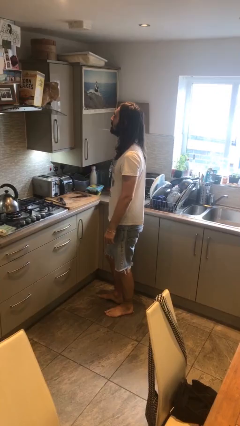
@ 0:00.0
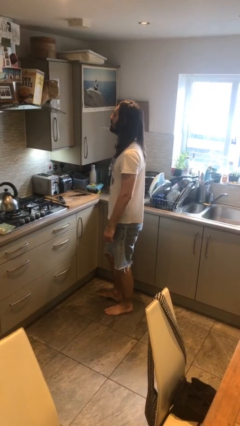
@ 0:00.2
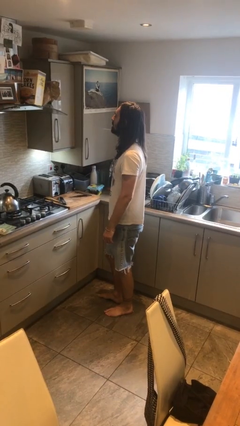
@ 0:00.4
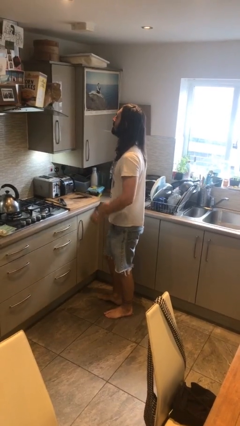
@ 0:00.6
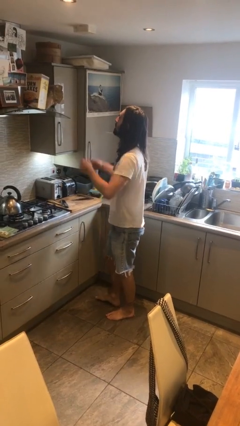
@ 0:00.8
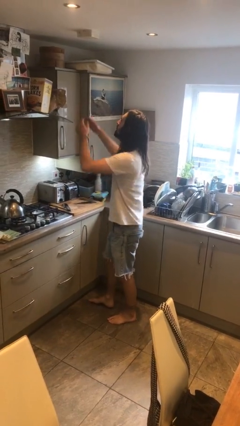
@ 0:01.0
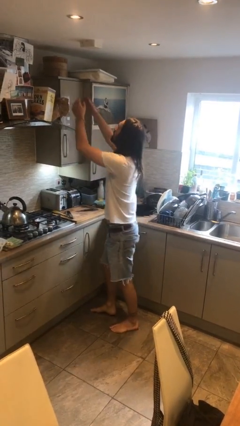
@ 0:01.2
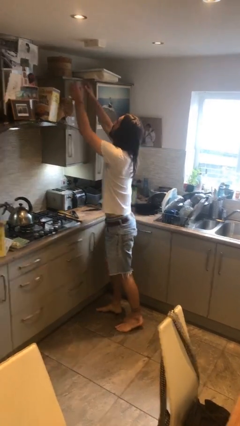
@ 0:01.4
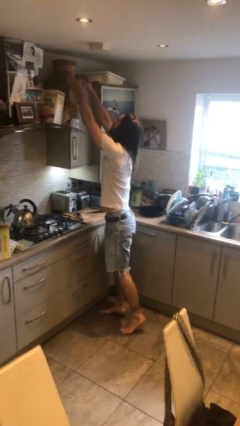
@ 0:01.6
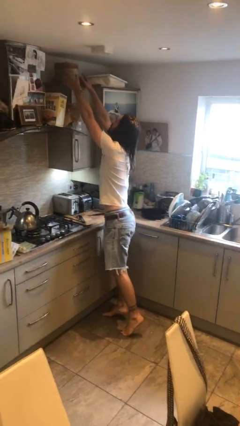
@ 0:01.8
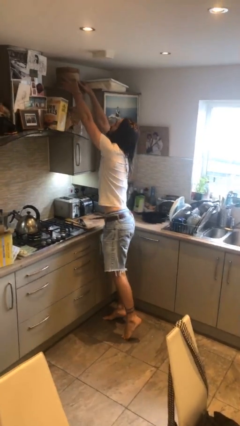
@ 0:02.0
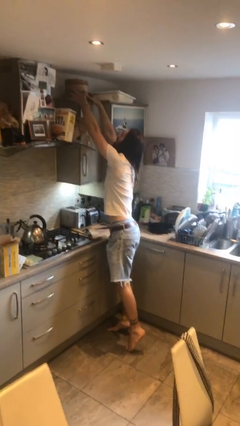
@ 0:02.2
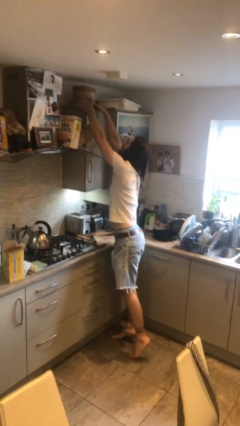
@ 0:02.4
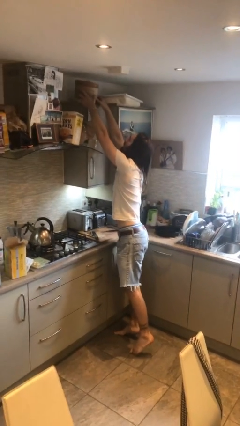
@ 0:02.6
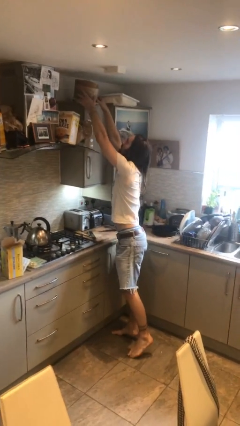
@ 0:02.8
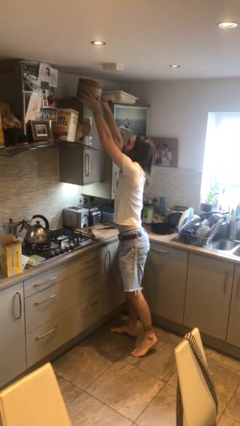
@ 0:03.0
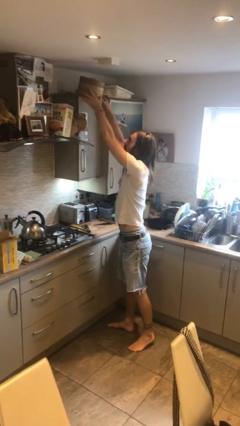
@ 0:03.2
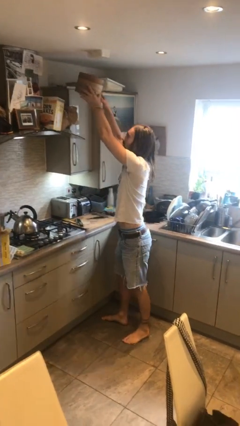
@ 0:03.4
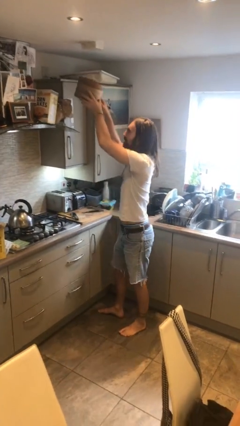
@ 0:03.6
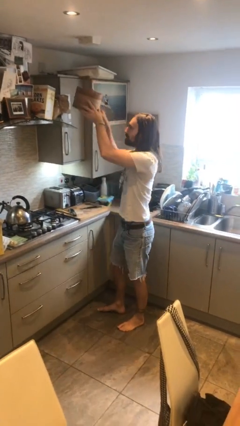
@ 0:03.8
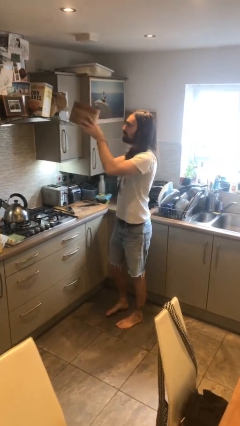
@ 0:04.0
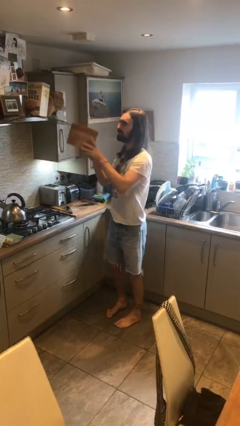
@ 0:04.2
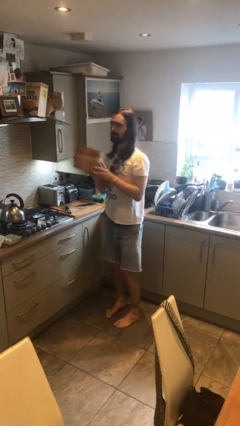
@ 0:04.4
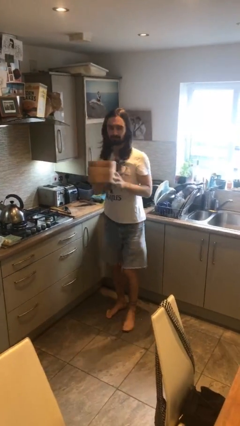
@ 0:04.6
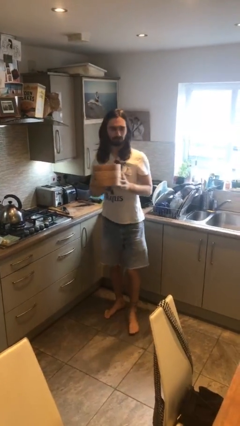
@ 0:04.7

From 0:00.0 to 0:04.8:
person picks up object from shelf

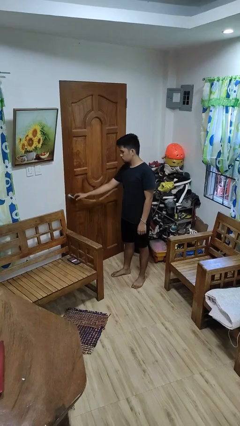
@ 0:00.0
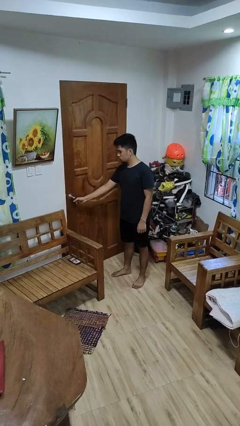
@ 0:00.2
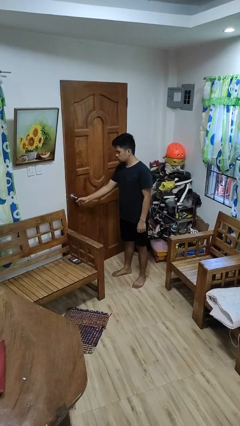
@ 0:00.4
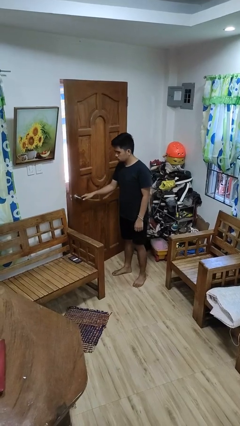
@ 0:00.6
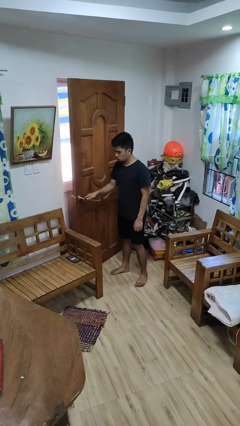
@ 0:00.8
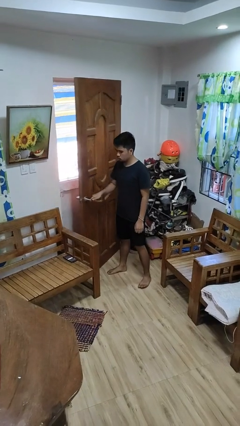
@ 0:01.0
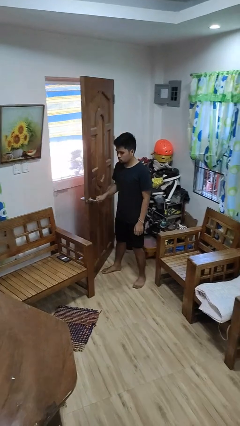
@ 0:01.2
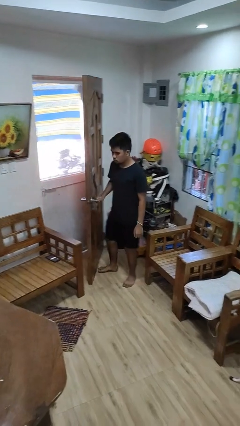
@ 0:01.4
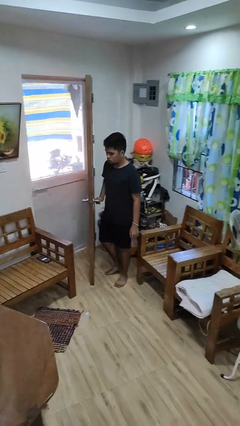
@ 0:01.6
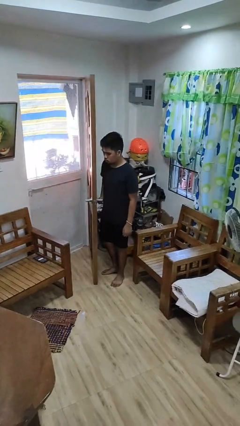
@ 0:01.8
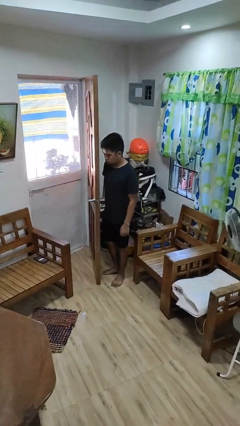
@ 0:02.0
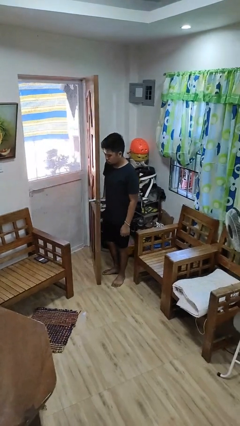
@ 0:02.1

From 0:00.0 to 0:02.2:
person opens facility door

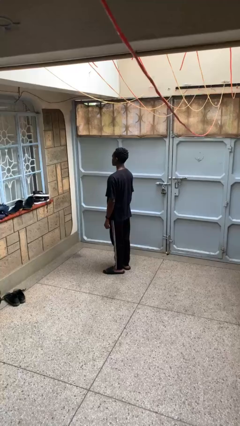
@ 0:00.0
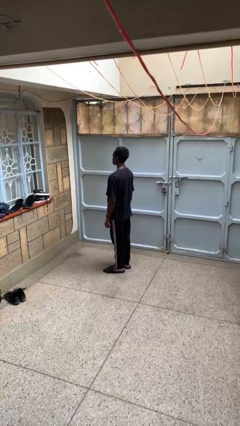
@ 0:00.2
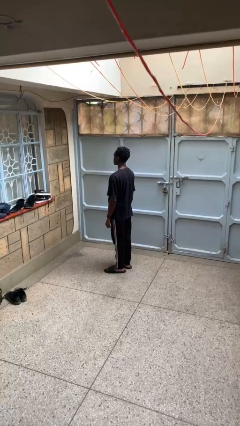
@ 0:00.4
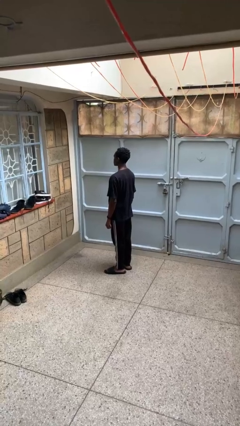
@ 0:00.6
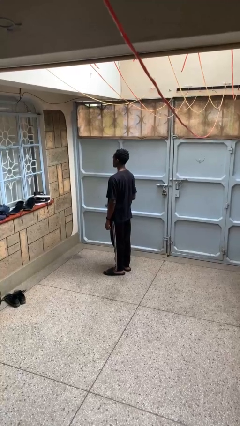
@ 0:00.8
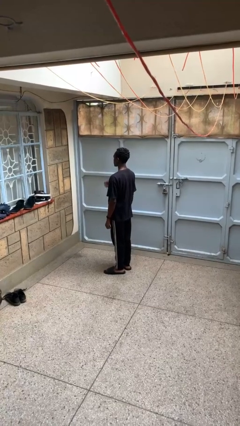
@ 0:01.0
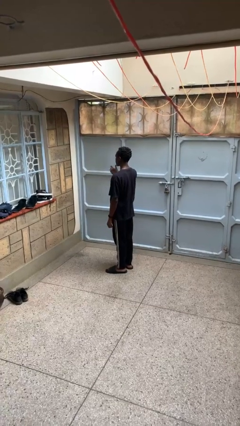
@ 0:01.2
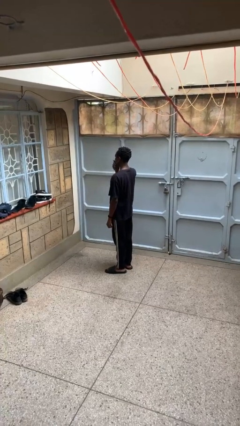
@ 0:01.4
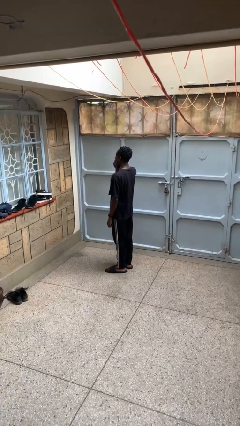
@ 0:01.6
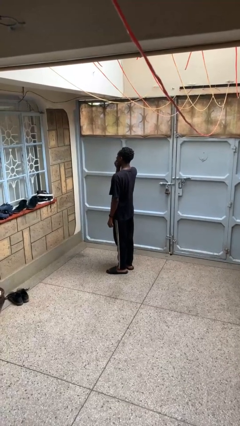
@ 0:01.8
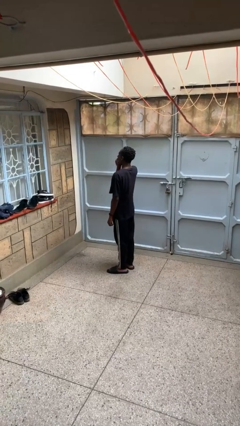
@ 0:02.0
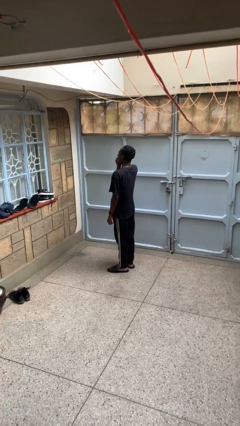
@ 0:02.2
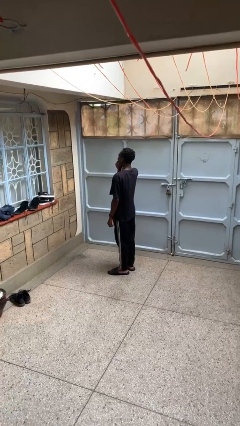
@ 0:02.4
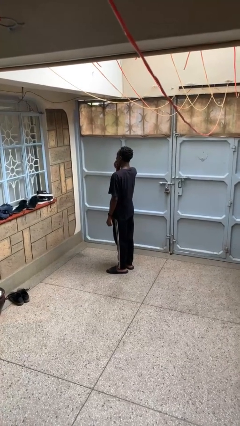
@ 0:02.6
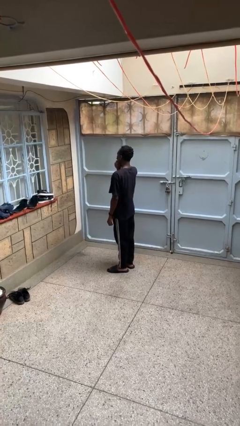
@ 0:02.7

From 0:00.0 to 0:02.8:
person yawns

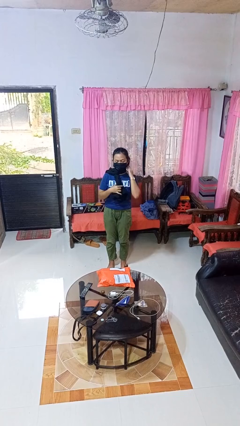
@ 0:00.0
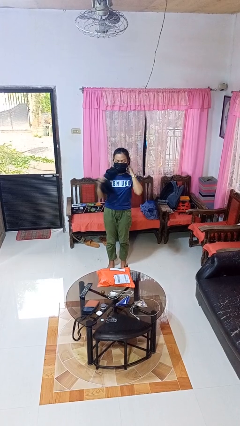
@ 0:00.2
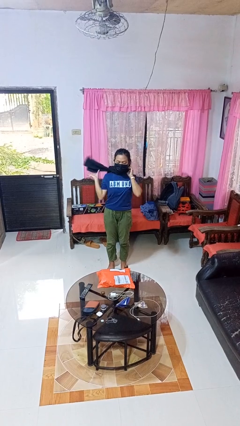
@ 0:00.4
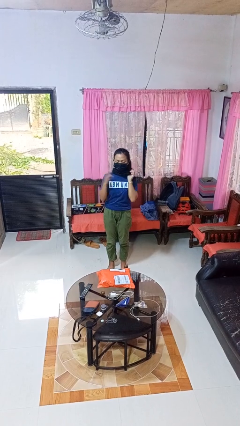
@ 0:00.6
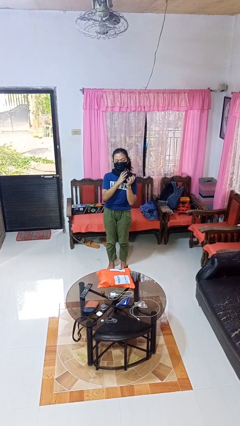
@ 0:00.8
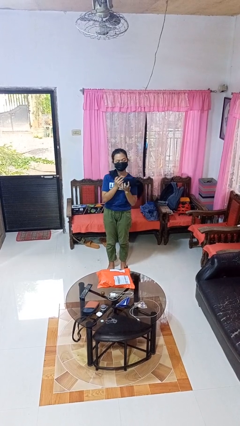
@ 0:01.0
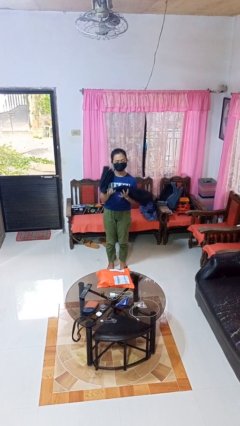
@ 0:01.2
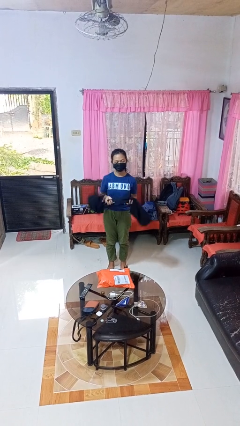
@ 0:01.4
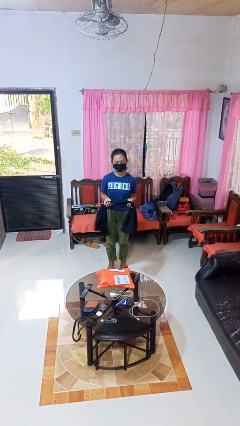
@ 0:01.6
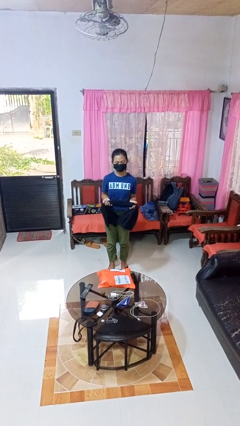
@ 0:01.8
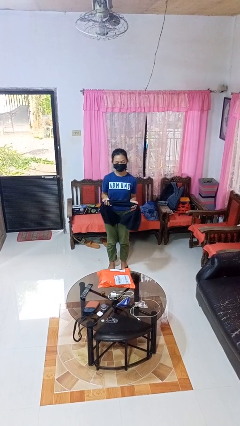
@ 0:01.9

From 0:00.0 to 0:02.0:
person takes off scarf

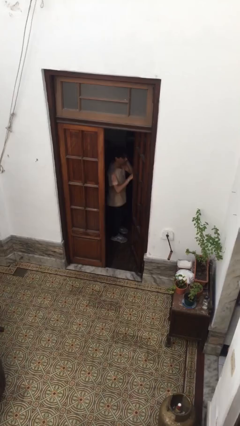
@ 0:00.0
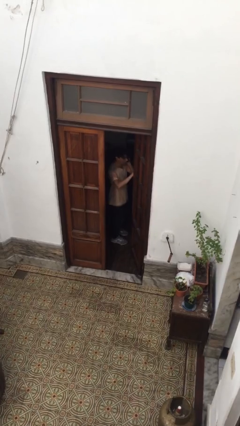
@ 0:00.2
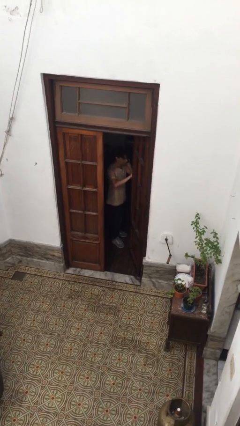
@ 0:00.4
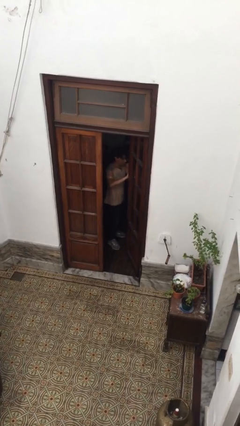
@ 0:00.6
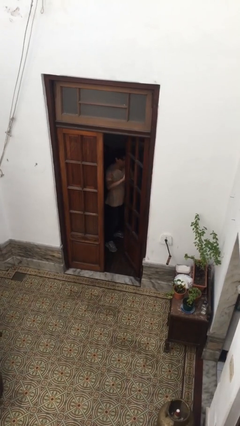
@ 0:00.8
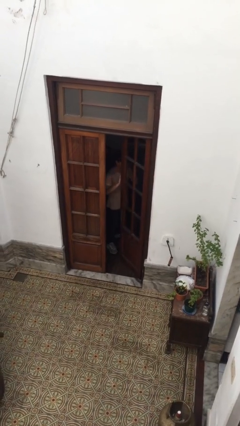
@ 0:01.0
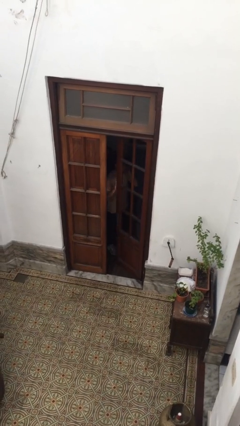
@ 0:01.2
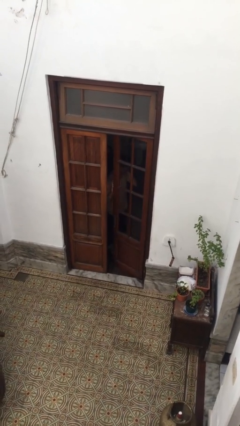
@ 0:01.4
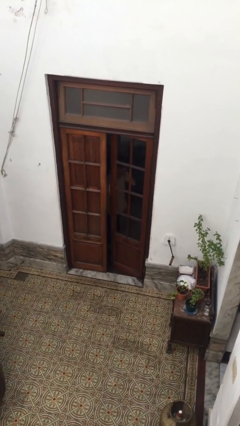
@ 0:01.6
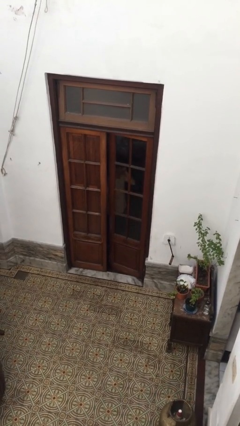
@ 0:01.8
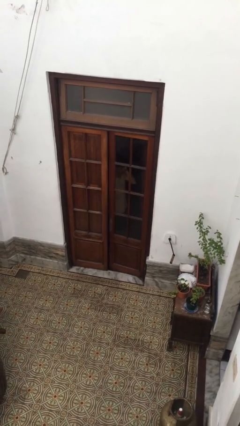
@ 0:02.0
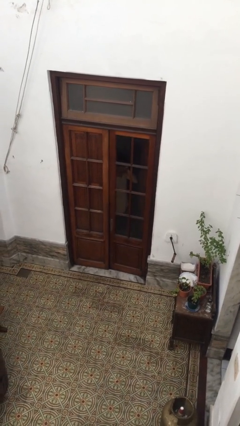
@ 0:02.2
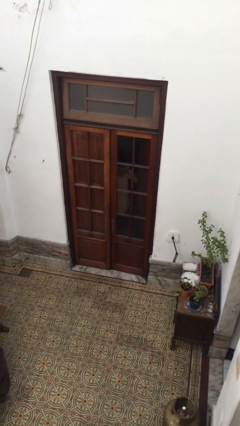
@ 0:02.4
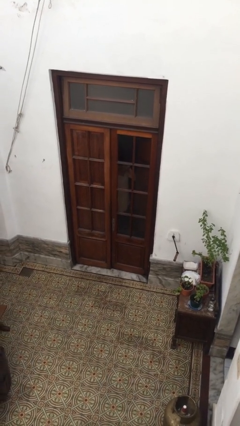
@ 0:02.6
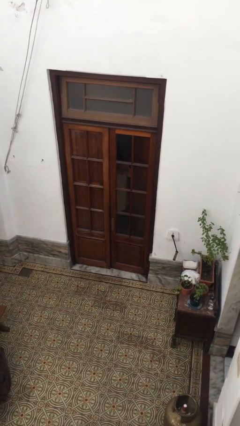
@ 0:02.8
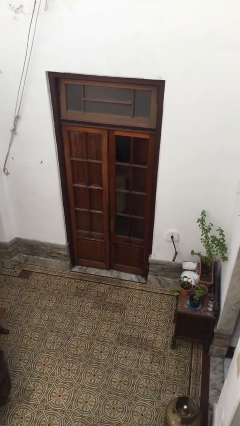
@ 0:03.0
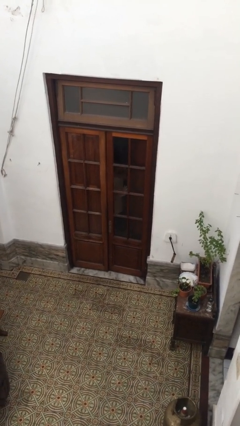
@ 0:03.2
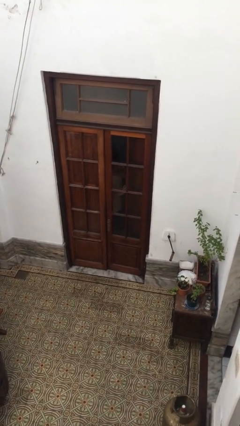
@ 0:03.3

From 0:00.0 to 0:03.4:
person closes facility door

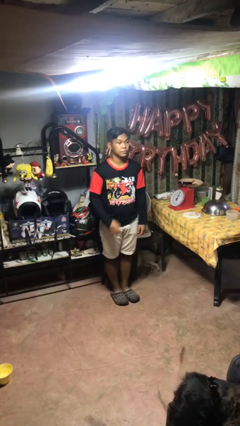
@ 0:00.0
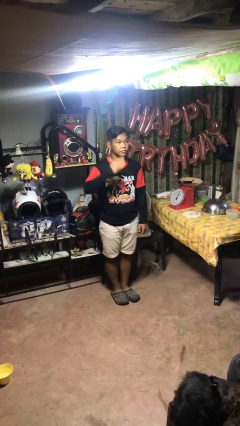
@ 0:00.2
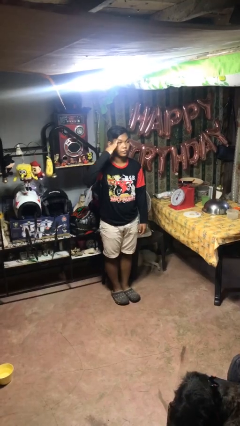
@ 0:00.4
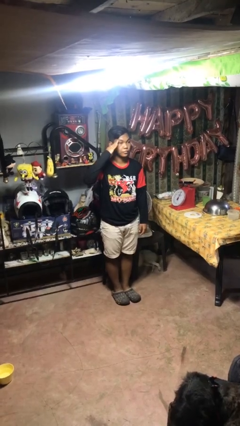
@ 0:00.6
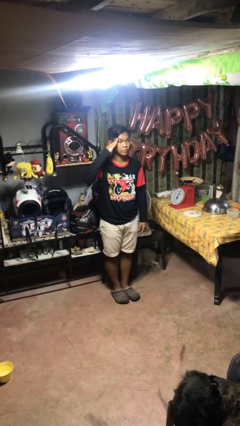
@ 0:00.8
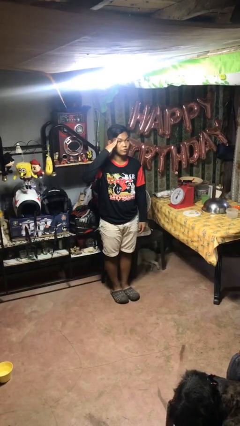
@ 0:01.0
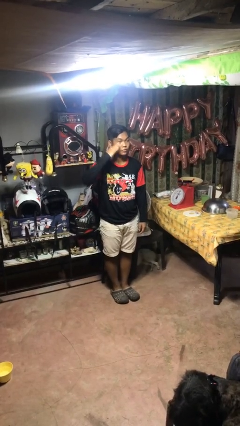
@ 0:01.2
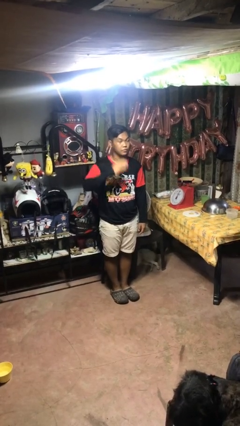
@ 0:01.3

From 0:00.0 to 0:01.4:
person salutes

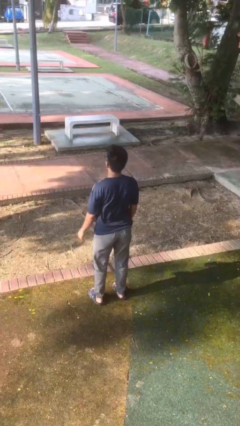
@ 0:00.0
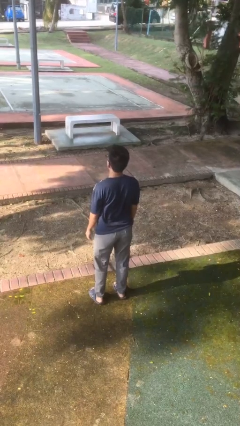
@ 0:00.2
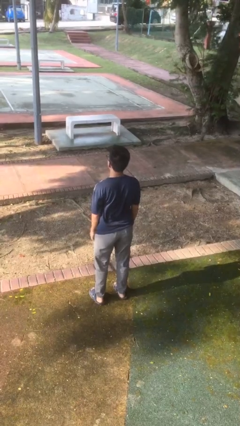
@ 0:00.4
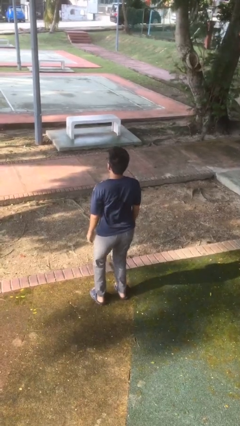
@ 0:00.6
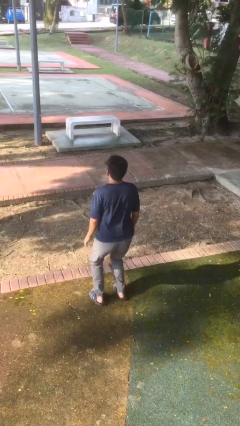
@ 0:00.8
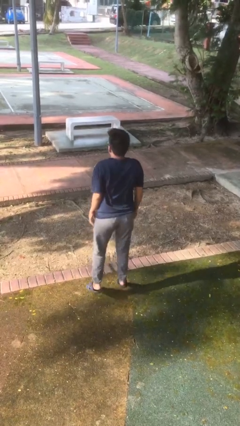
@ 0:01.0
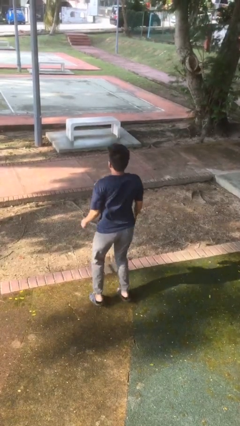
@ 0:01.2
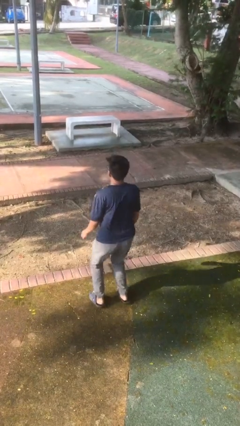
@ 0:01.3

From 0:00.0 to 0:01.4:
person jumps
